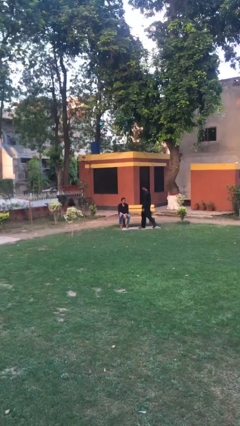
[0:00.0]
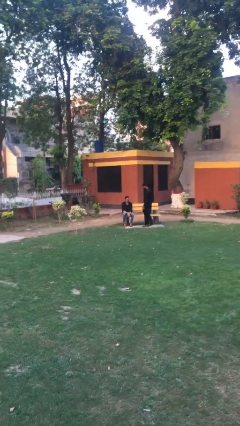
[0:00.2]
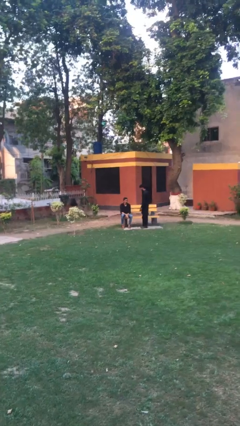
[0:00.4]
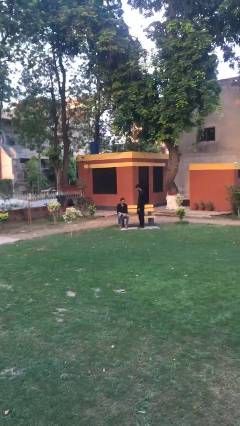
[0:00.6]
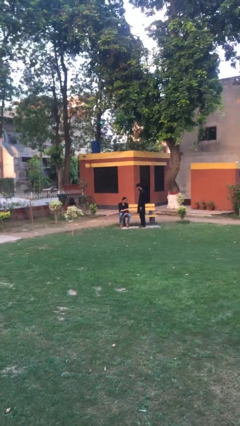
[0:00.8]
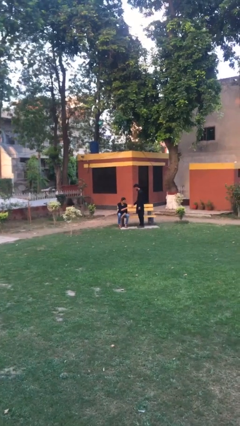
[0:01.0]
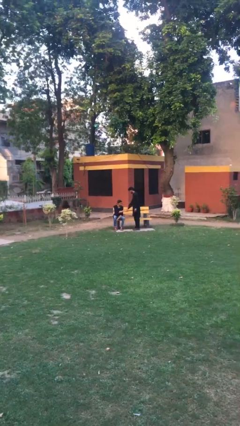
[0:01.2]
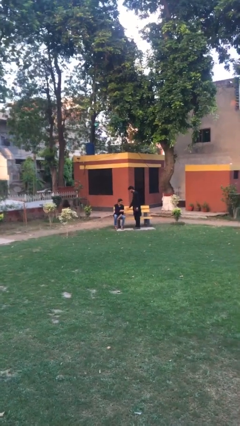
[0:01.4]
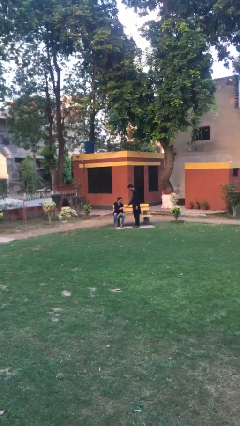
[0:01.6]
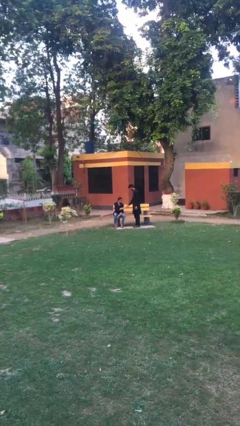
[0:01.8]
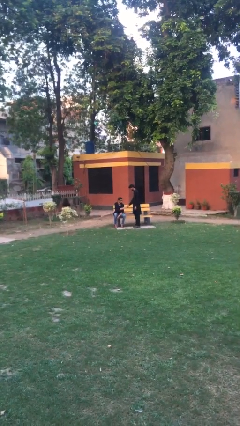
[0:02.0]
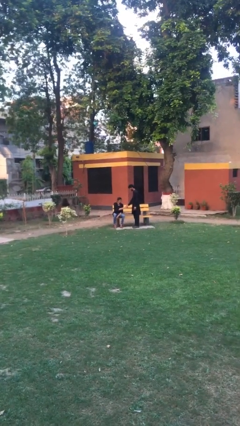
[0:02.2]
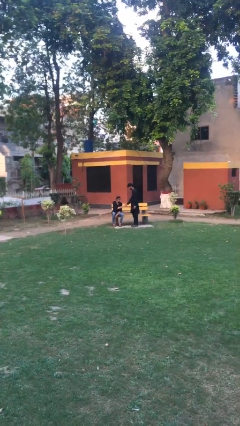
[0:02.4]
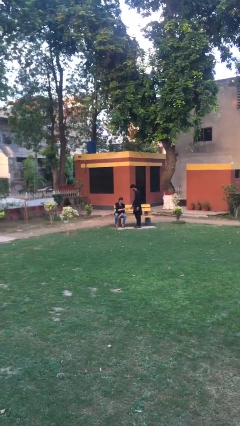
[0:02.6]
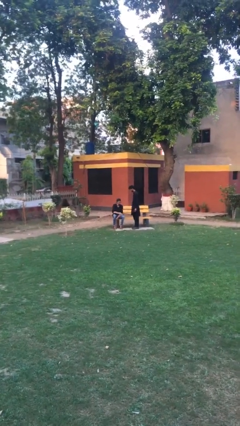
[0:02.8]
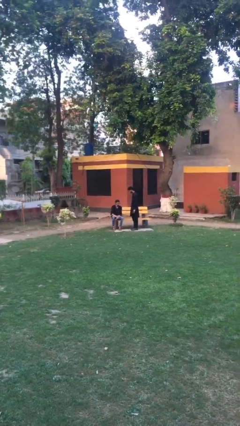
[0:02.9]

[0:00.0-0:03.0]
person shakes hand

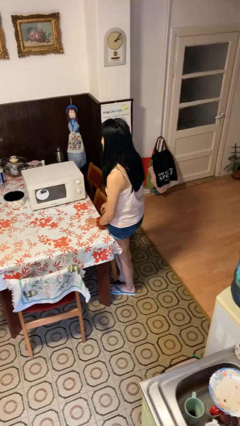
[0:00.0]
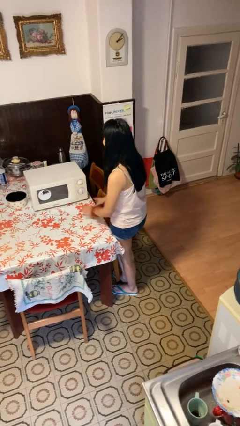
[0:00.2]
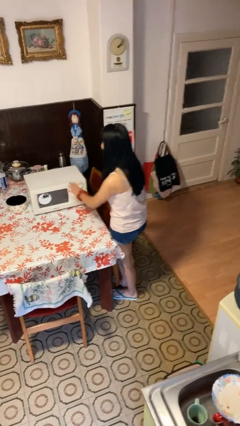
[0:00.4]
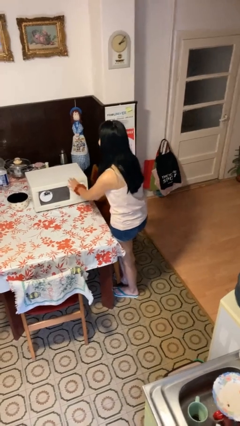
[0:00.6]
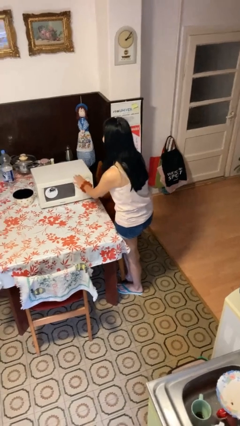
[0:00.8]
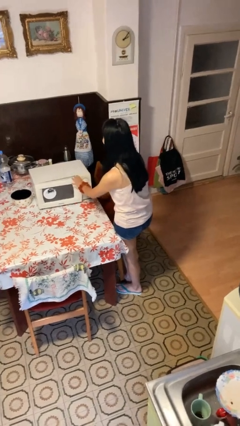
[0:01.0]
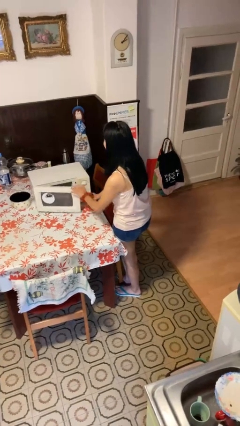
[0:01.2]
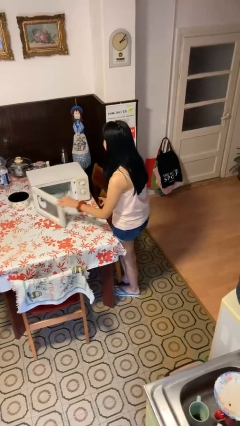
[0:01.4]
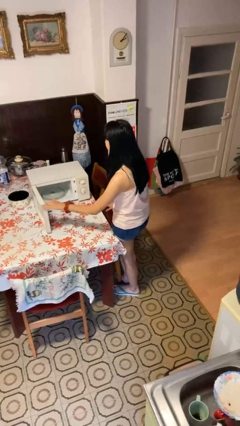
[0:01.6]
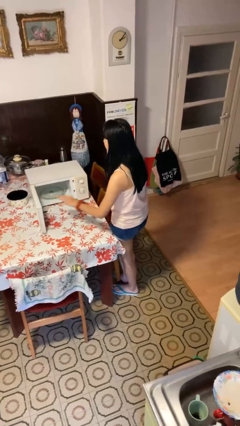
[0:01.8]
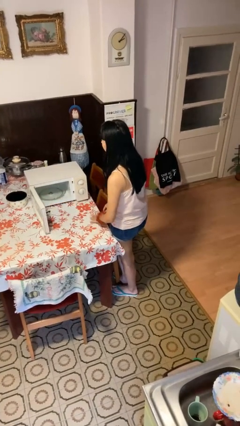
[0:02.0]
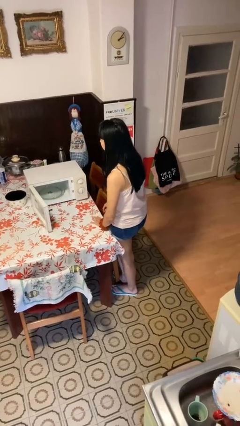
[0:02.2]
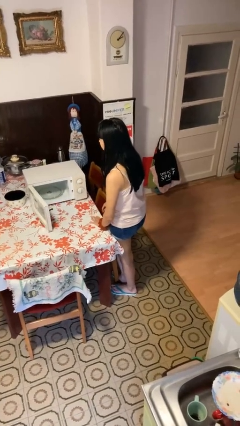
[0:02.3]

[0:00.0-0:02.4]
person opens microwave

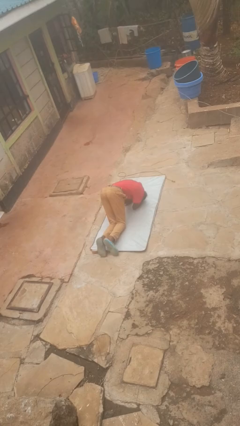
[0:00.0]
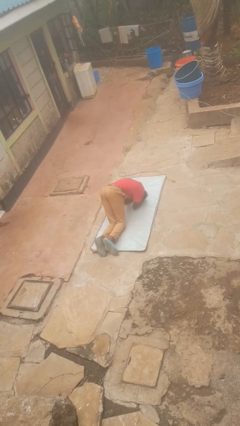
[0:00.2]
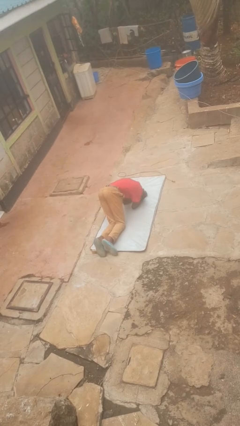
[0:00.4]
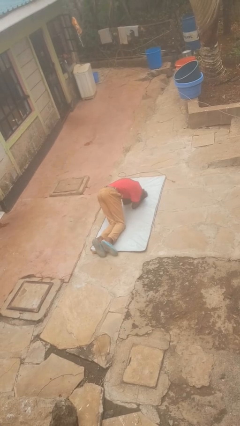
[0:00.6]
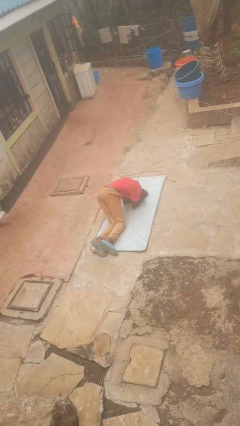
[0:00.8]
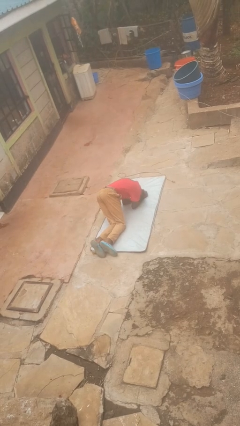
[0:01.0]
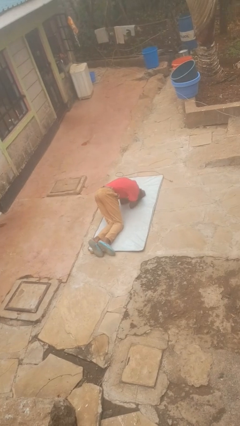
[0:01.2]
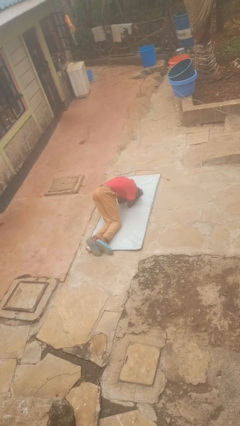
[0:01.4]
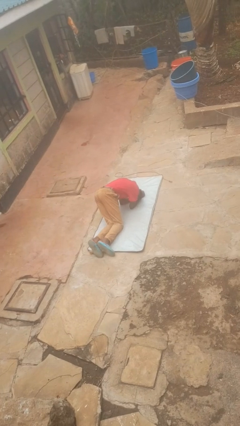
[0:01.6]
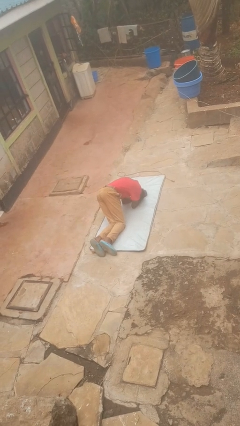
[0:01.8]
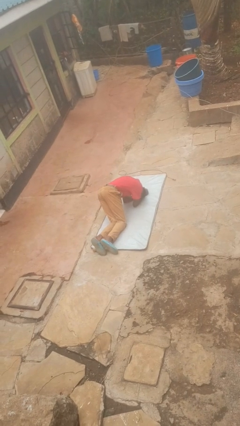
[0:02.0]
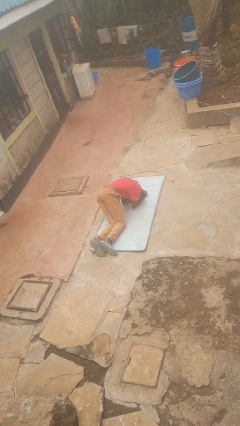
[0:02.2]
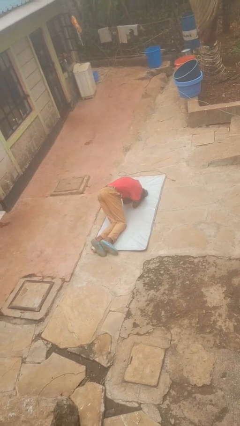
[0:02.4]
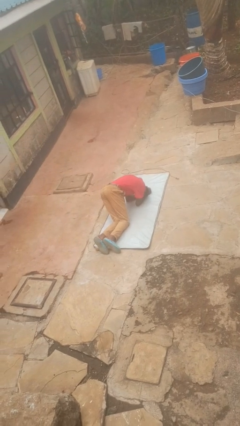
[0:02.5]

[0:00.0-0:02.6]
person lies down on floor

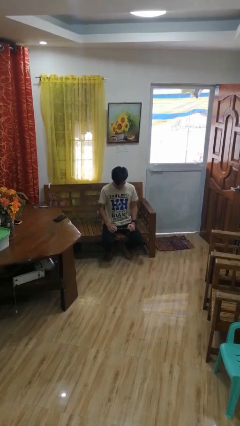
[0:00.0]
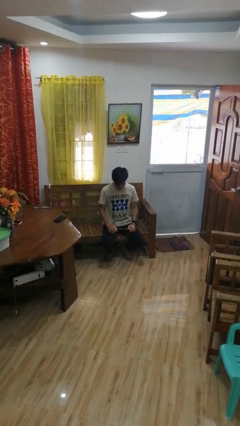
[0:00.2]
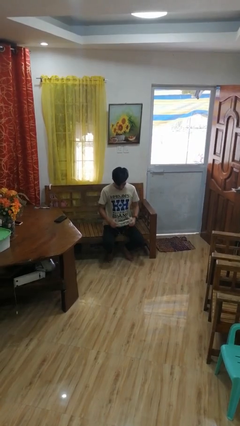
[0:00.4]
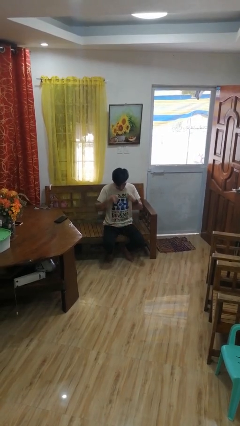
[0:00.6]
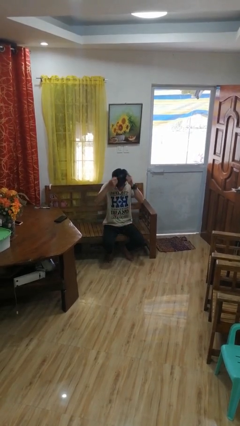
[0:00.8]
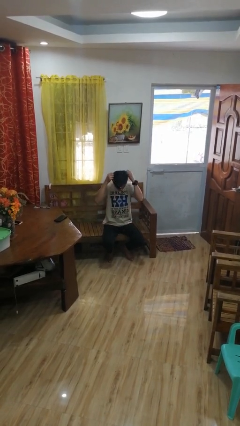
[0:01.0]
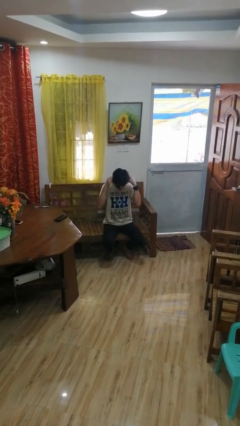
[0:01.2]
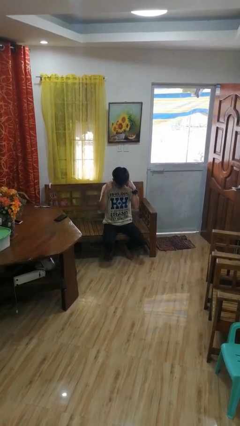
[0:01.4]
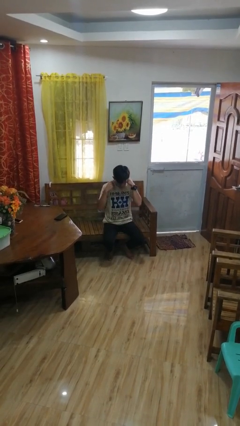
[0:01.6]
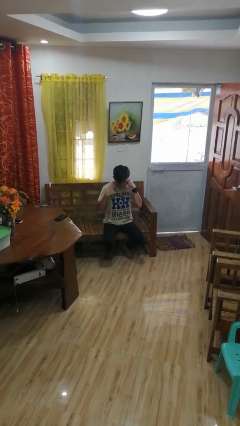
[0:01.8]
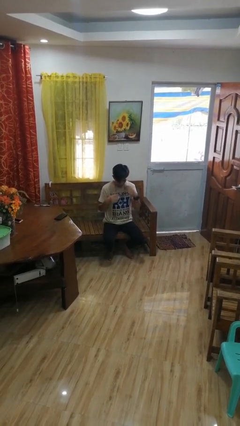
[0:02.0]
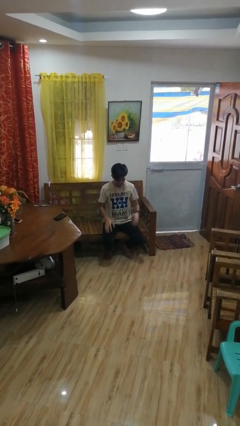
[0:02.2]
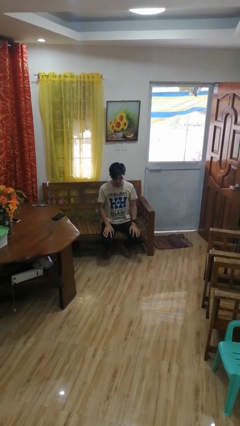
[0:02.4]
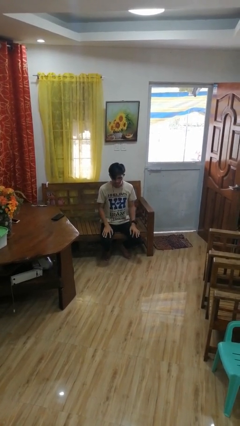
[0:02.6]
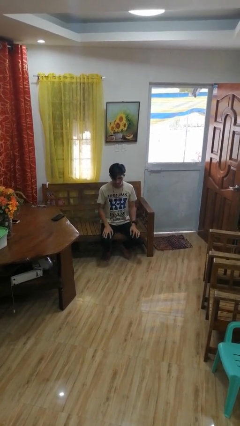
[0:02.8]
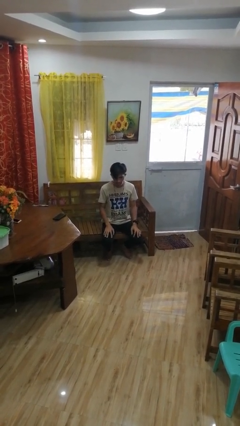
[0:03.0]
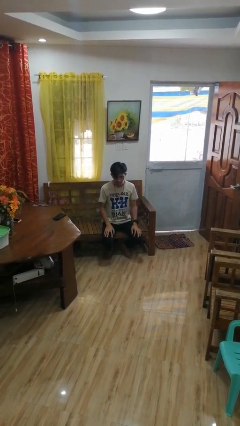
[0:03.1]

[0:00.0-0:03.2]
person puts on necklace

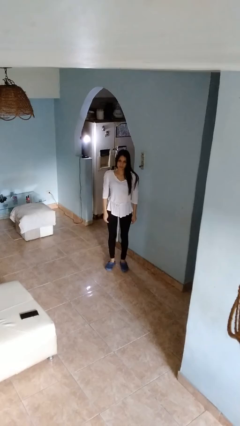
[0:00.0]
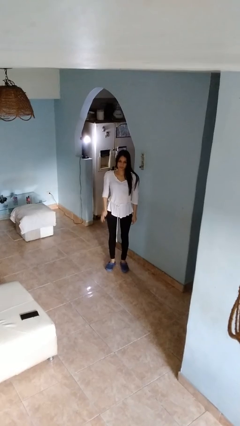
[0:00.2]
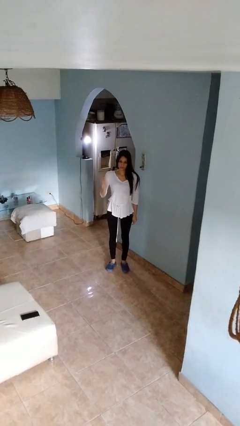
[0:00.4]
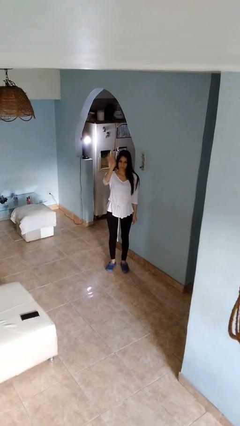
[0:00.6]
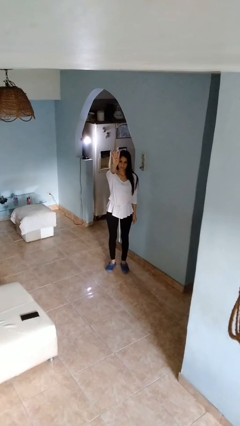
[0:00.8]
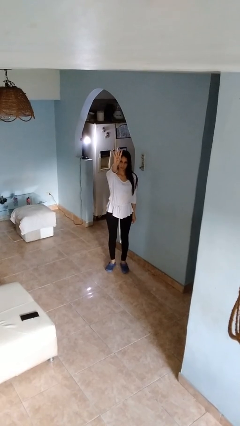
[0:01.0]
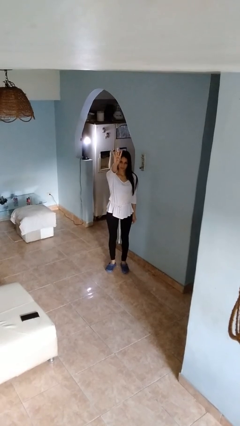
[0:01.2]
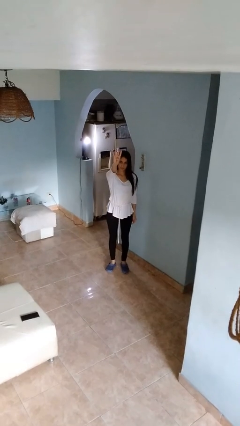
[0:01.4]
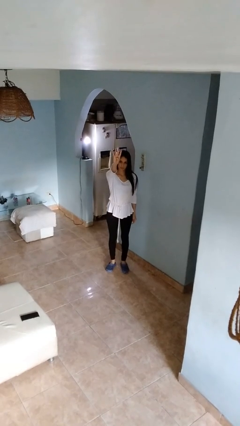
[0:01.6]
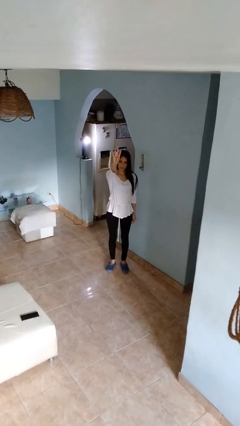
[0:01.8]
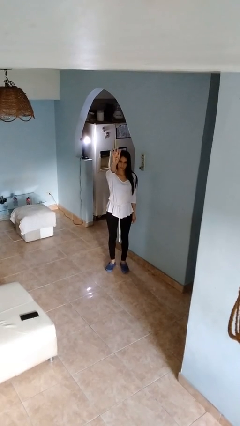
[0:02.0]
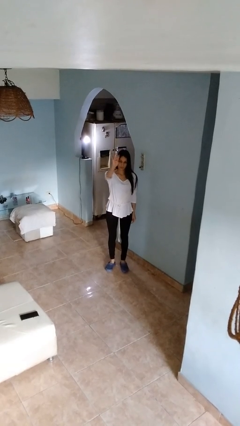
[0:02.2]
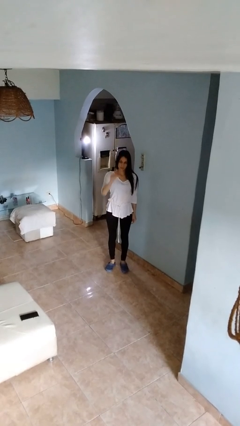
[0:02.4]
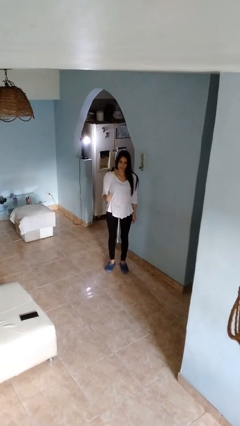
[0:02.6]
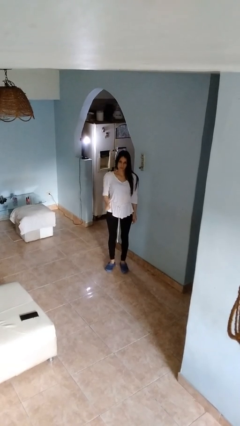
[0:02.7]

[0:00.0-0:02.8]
person gestures number four

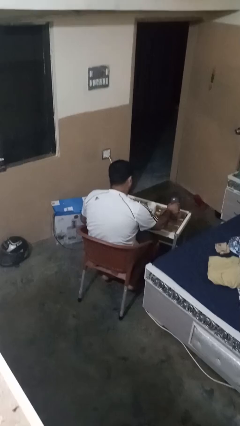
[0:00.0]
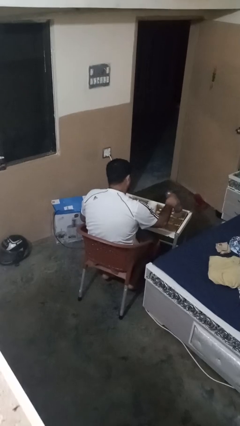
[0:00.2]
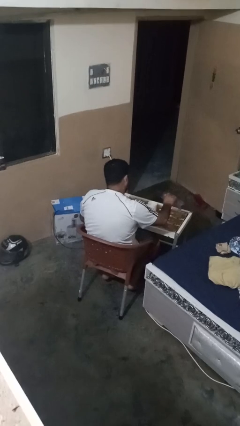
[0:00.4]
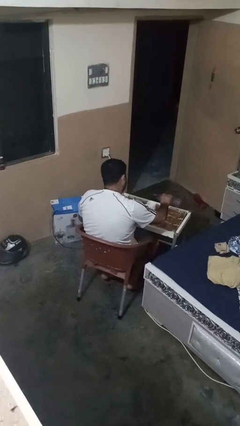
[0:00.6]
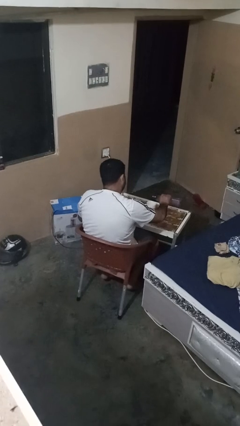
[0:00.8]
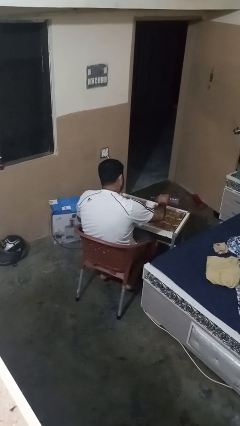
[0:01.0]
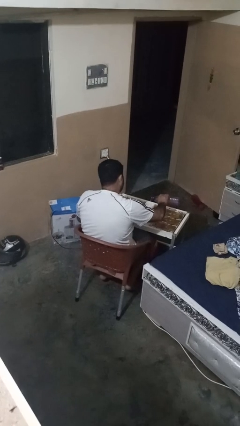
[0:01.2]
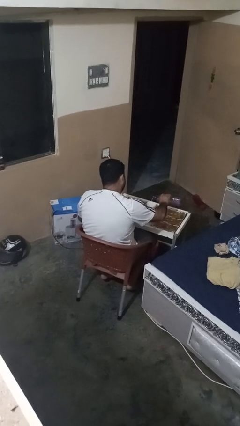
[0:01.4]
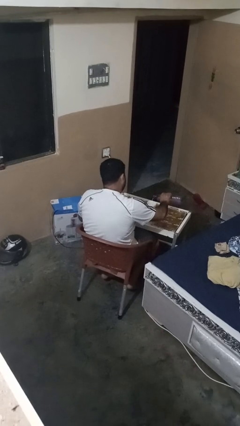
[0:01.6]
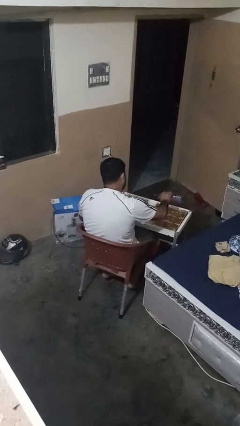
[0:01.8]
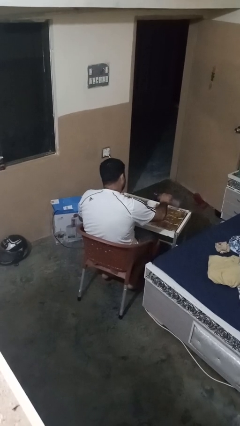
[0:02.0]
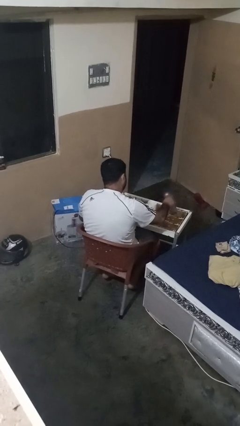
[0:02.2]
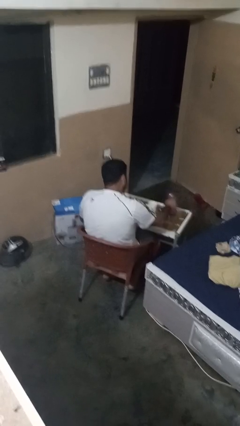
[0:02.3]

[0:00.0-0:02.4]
person pours liquid into cup

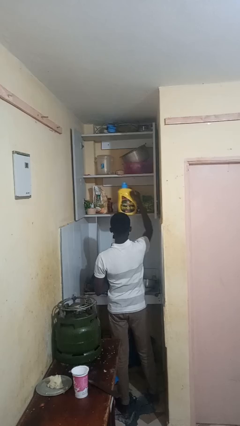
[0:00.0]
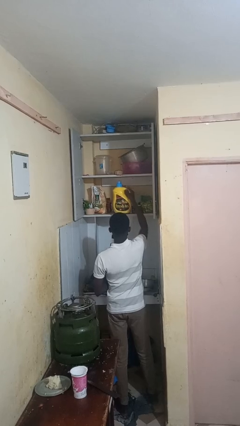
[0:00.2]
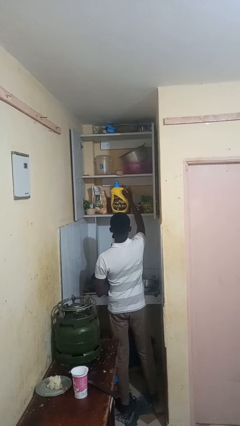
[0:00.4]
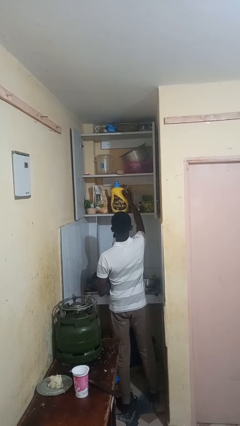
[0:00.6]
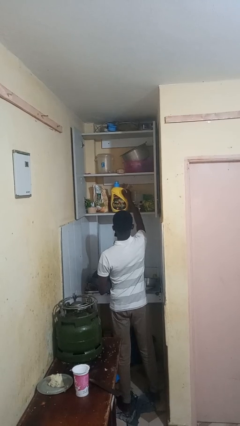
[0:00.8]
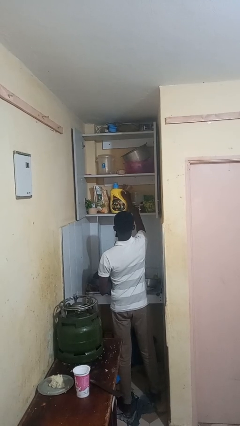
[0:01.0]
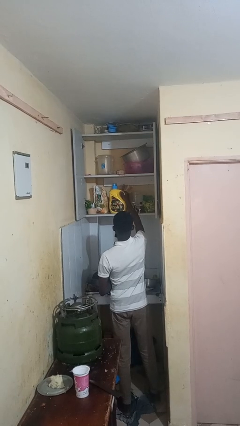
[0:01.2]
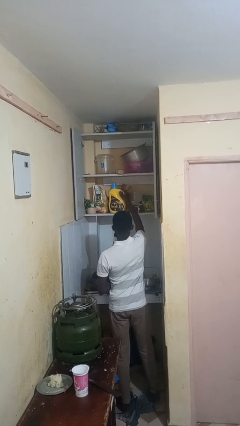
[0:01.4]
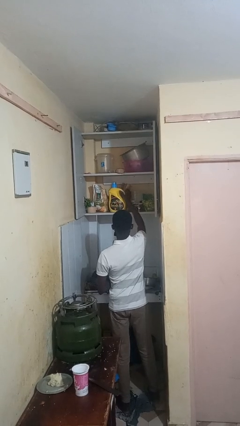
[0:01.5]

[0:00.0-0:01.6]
person puts down object on countertop
